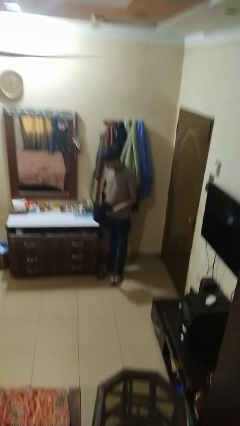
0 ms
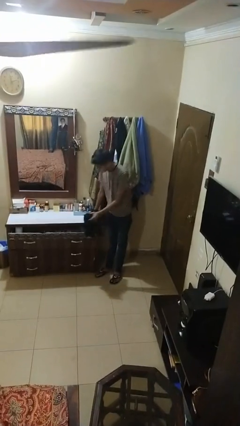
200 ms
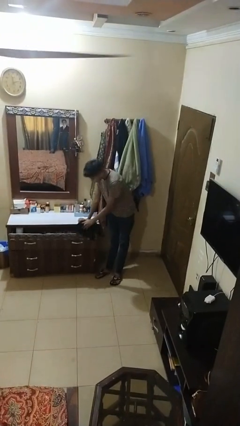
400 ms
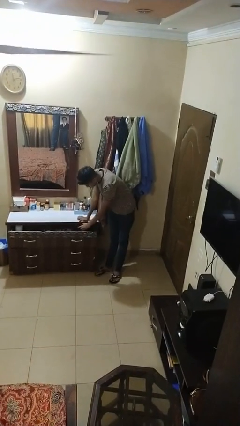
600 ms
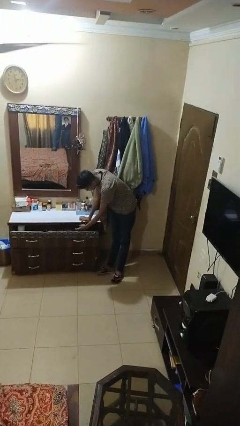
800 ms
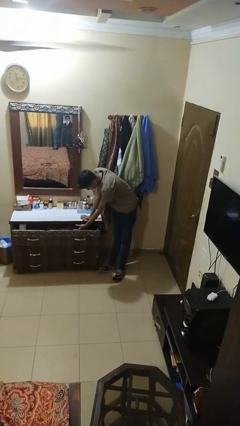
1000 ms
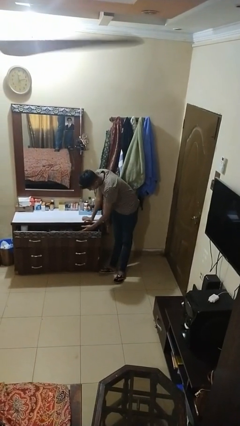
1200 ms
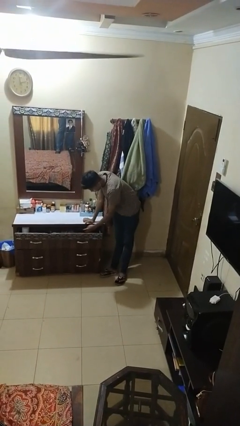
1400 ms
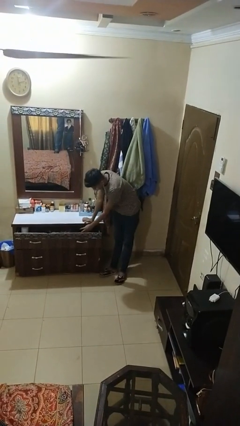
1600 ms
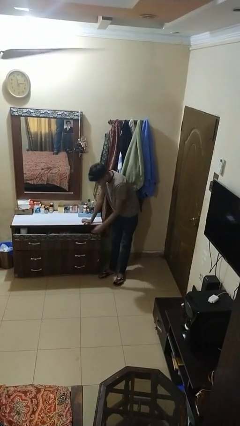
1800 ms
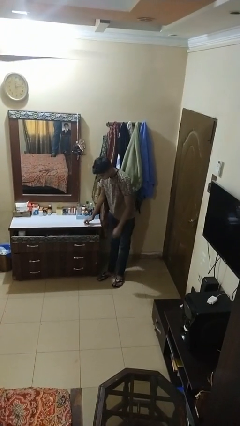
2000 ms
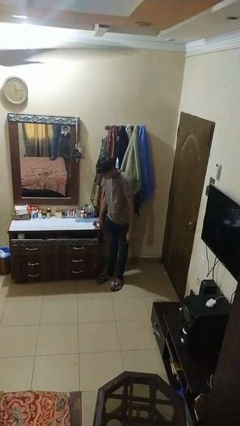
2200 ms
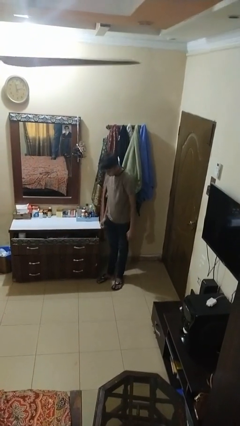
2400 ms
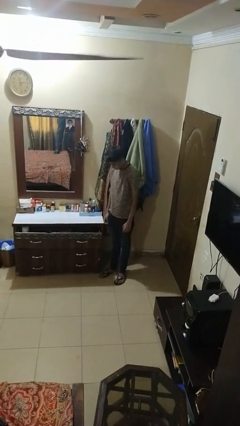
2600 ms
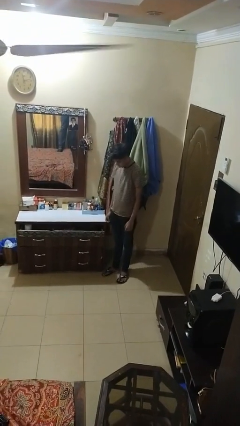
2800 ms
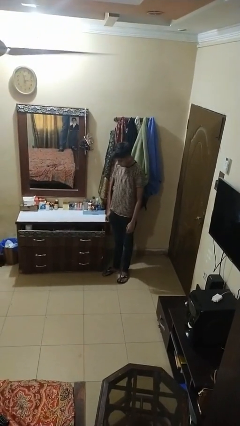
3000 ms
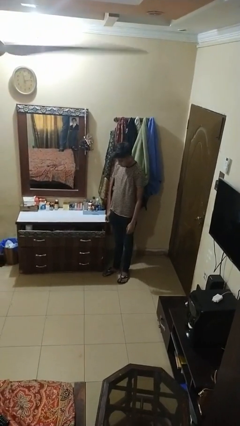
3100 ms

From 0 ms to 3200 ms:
person puts clothes into dresser

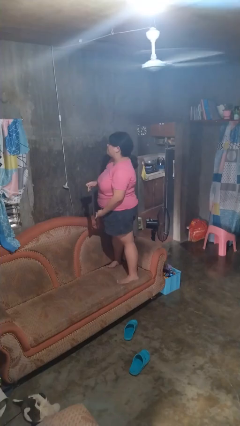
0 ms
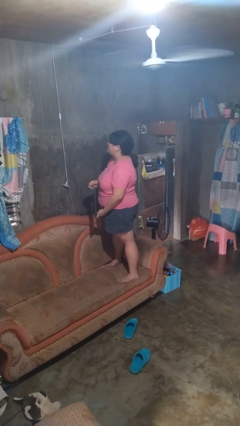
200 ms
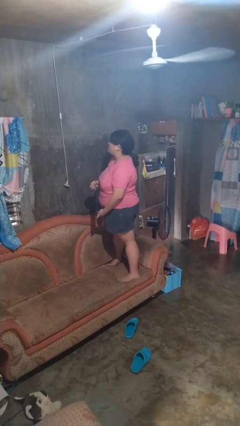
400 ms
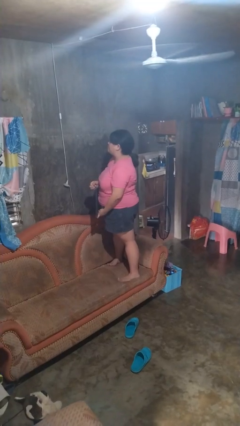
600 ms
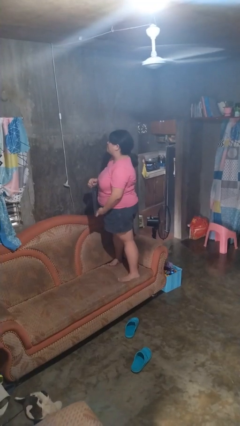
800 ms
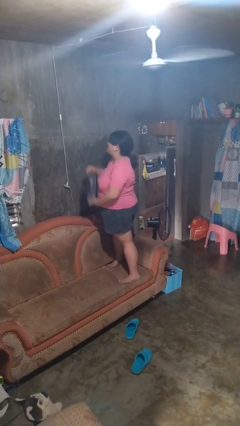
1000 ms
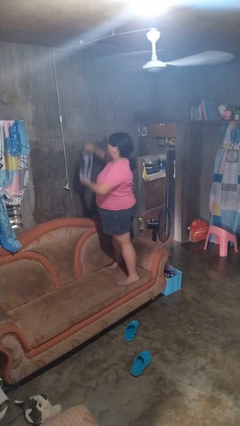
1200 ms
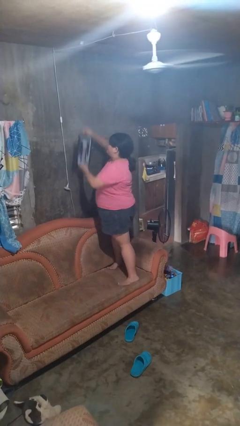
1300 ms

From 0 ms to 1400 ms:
person puts up picture frame

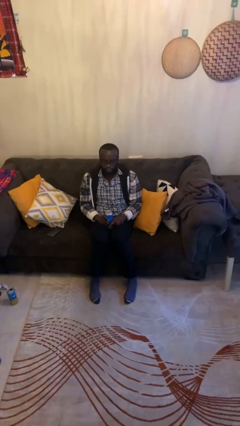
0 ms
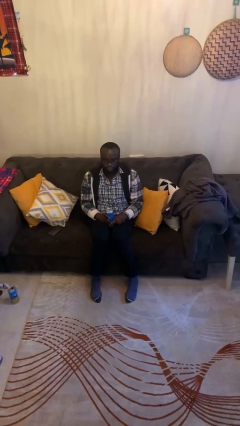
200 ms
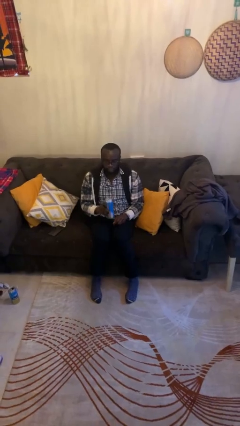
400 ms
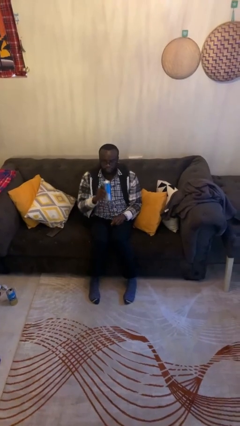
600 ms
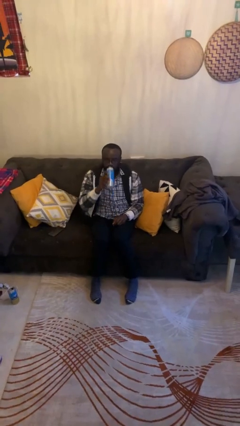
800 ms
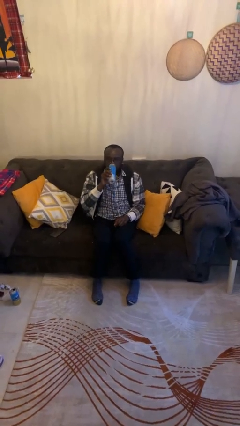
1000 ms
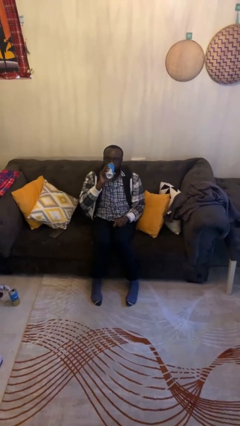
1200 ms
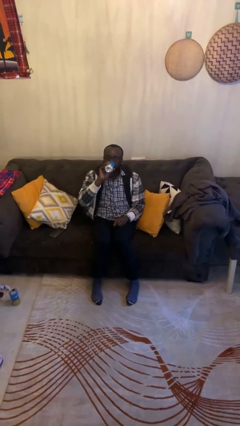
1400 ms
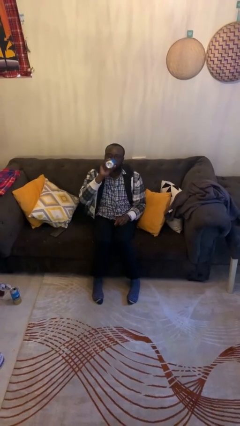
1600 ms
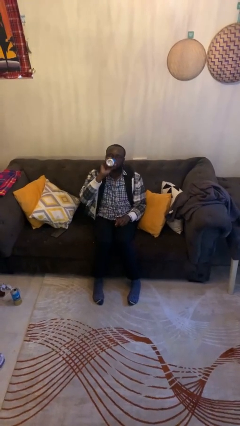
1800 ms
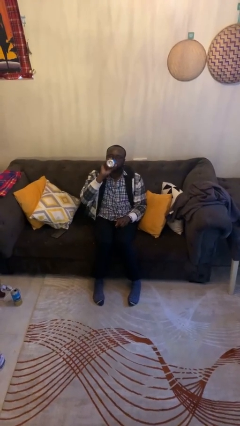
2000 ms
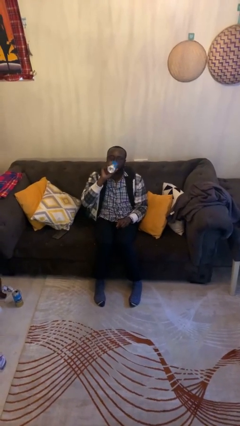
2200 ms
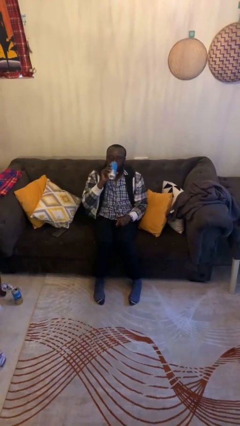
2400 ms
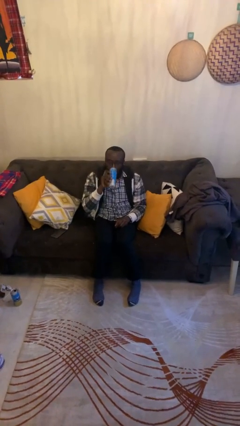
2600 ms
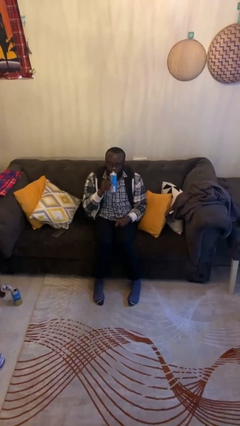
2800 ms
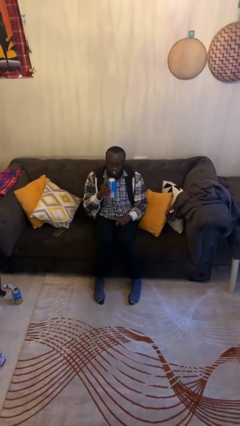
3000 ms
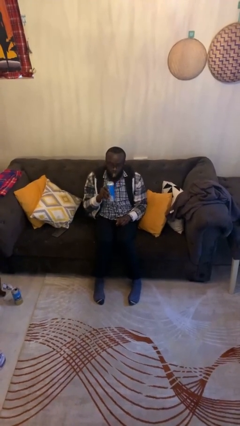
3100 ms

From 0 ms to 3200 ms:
person drinks from beverage can

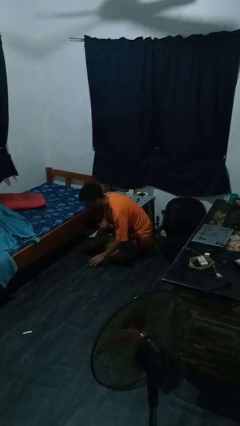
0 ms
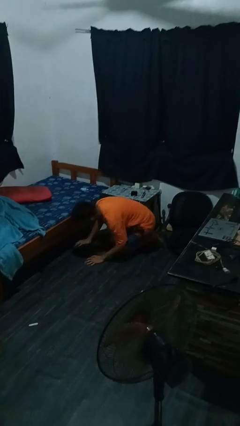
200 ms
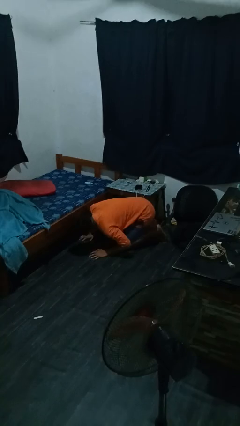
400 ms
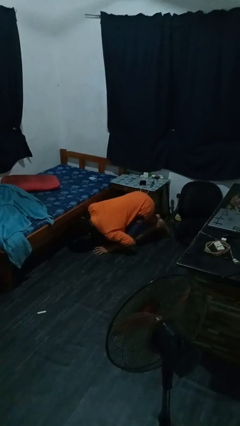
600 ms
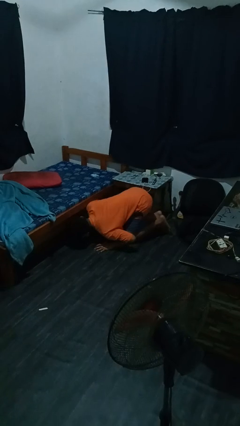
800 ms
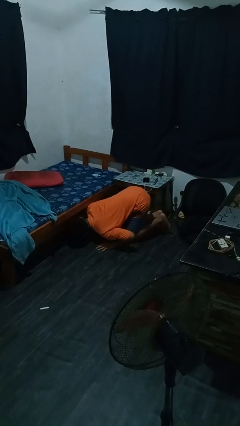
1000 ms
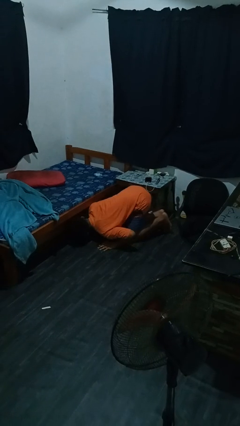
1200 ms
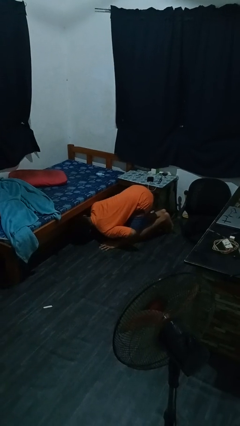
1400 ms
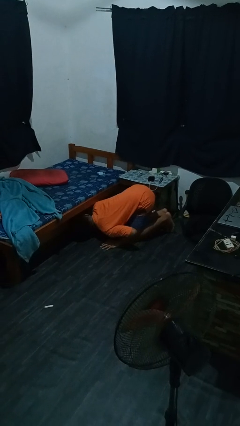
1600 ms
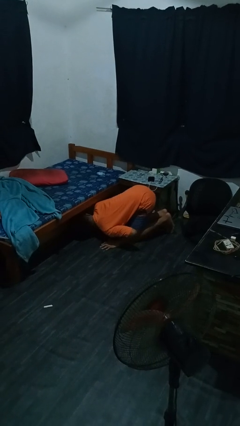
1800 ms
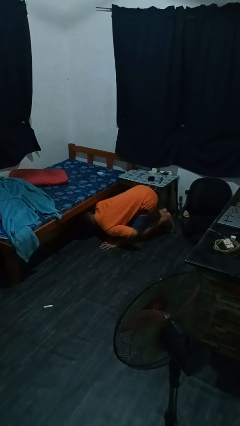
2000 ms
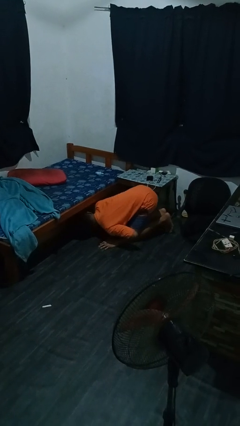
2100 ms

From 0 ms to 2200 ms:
person searches under bed

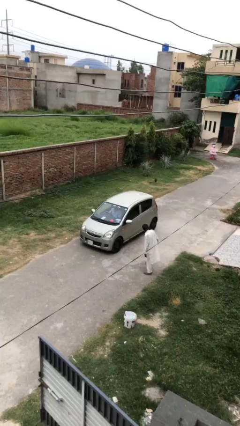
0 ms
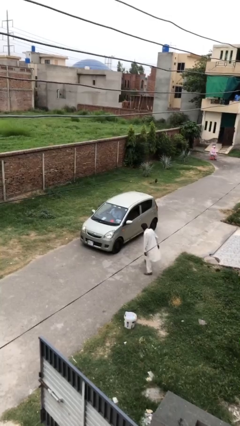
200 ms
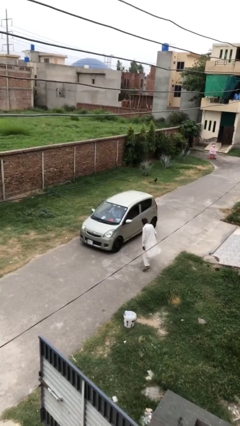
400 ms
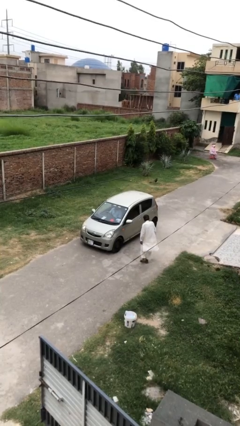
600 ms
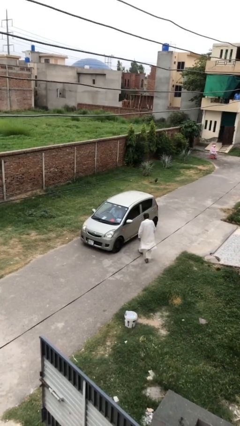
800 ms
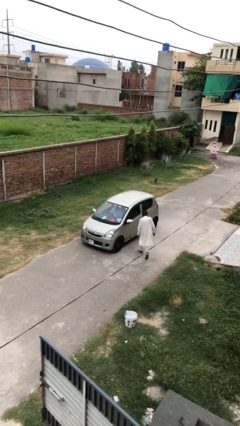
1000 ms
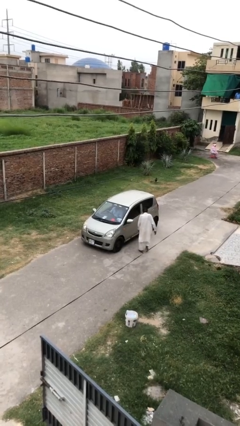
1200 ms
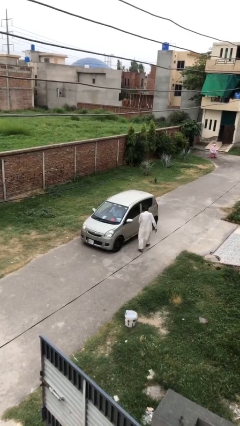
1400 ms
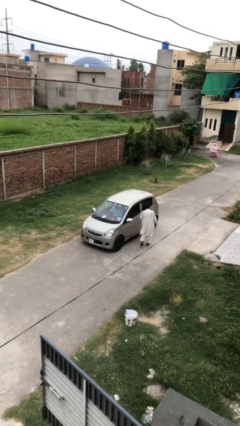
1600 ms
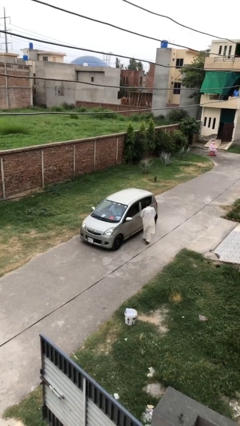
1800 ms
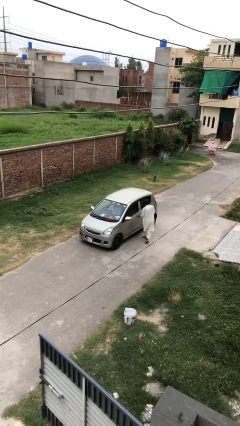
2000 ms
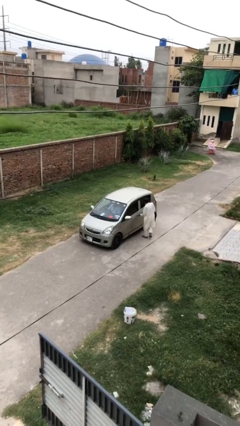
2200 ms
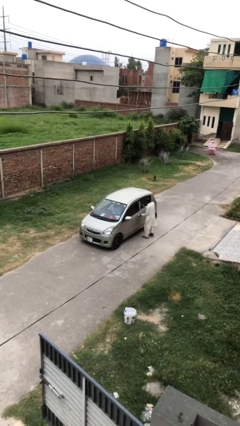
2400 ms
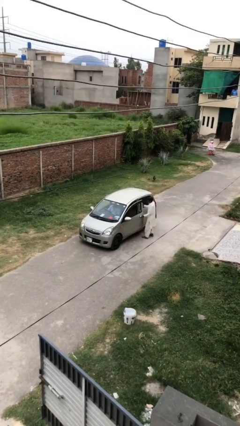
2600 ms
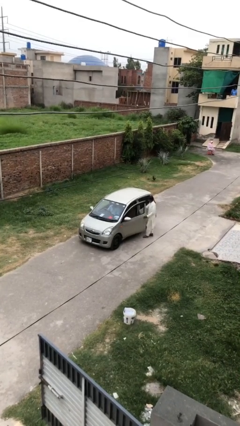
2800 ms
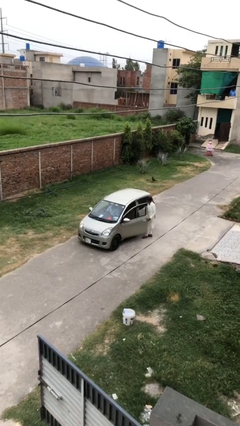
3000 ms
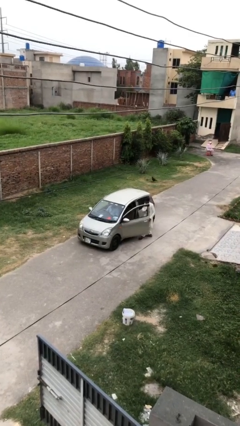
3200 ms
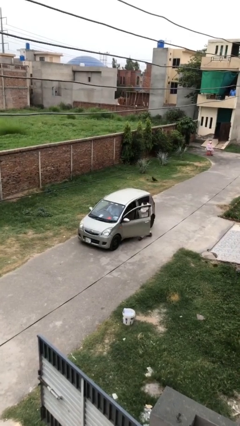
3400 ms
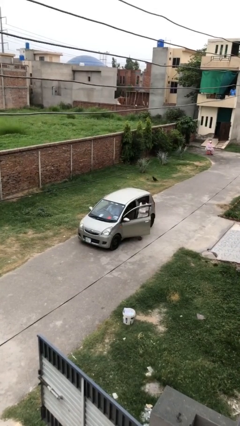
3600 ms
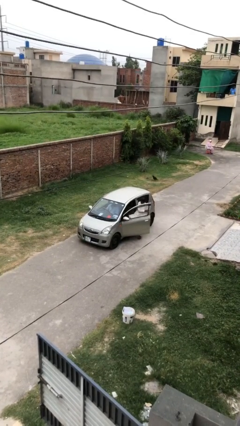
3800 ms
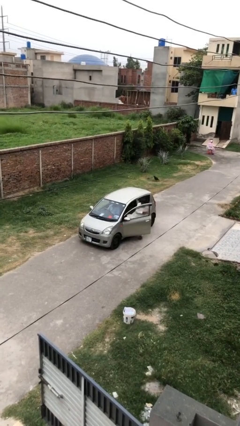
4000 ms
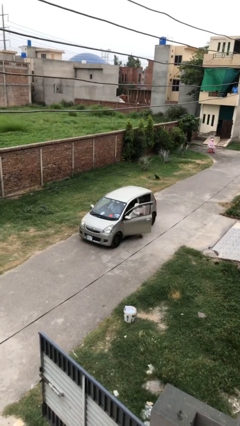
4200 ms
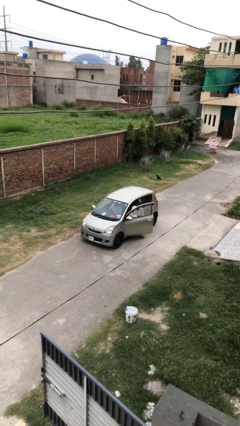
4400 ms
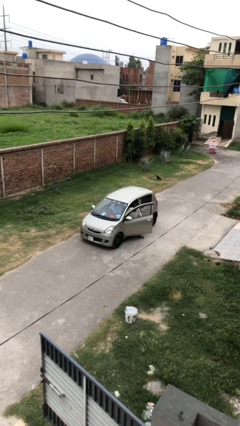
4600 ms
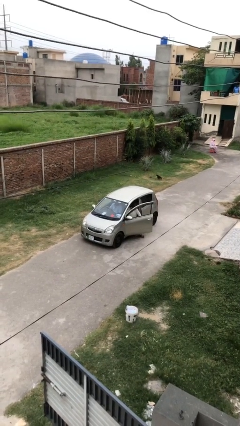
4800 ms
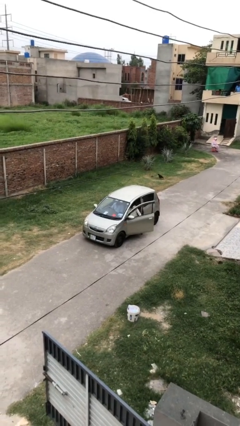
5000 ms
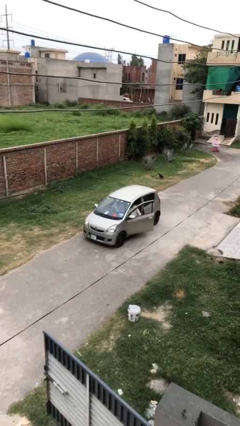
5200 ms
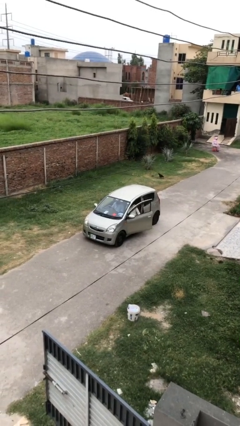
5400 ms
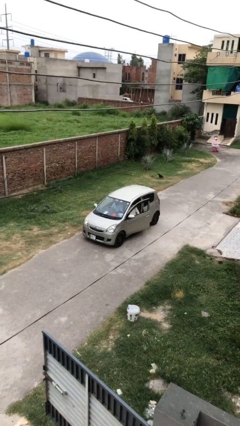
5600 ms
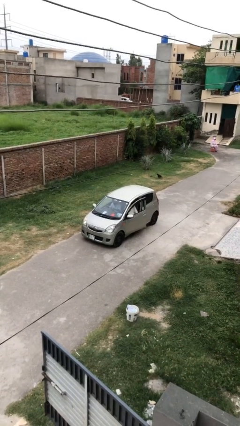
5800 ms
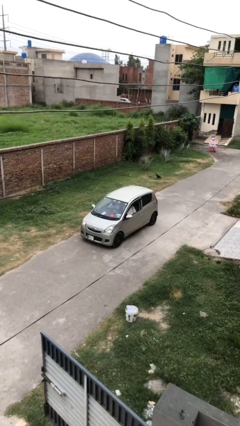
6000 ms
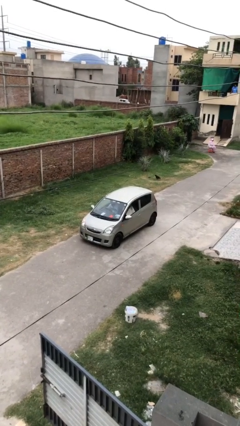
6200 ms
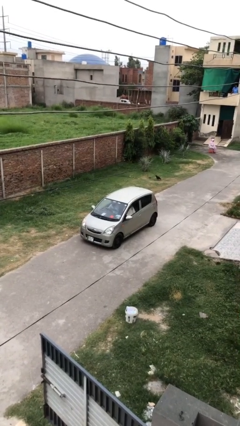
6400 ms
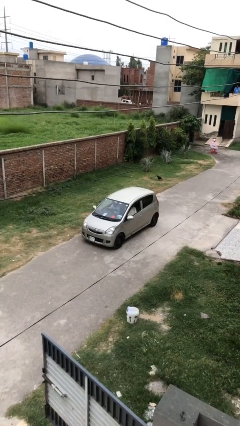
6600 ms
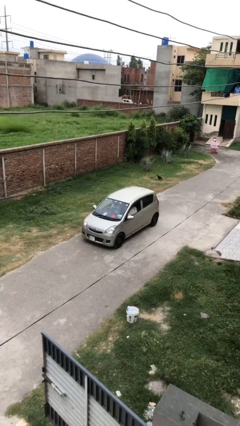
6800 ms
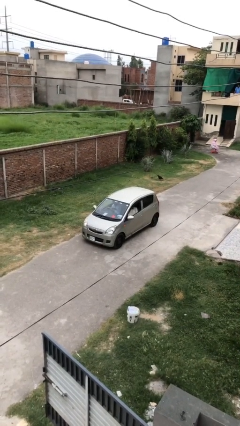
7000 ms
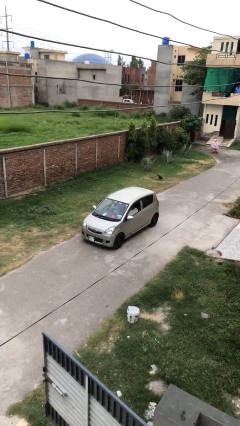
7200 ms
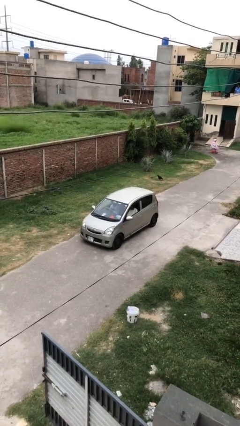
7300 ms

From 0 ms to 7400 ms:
car picks up person
